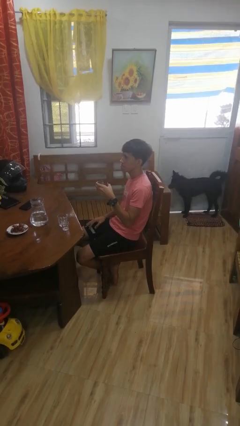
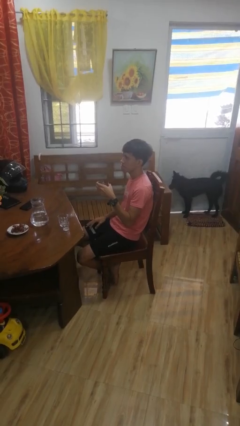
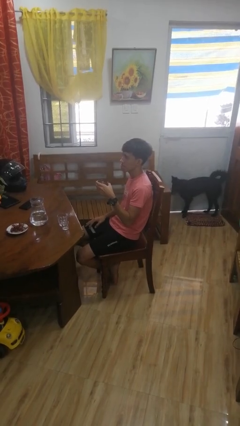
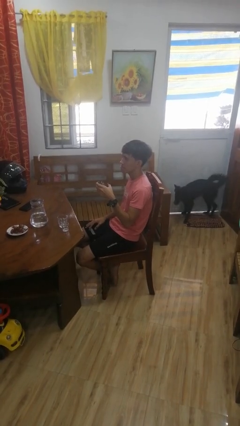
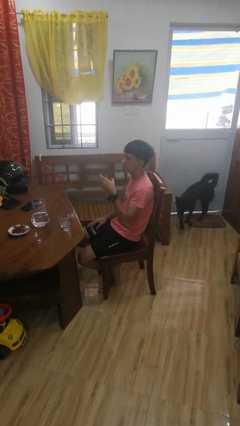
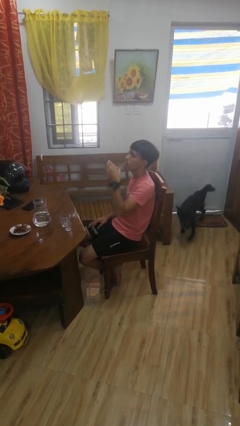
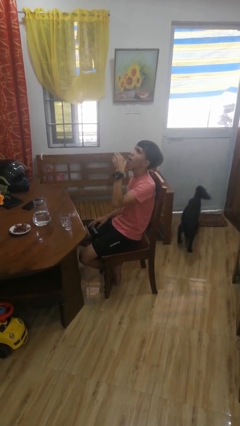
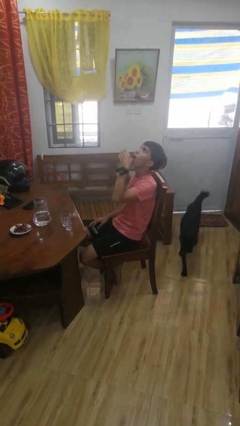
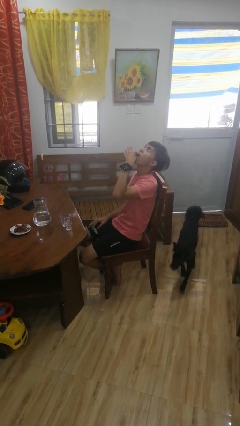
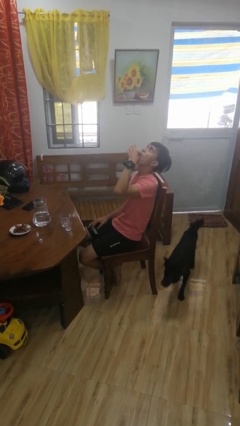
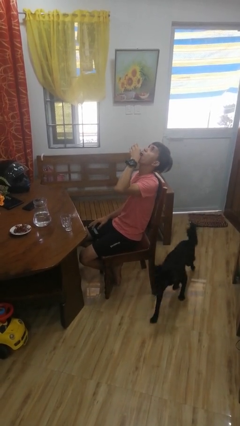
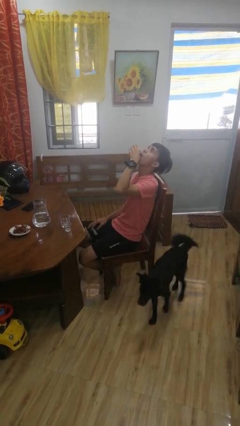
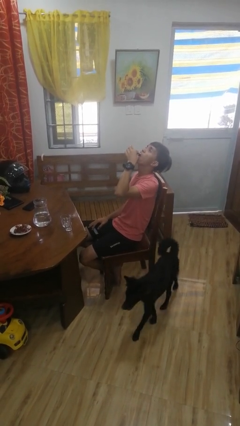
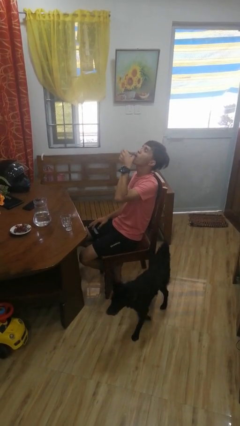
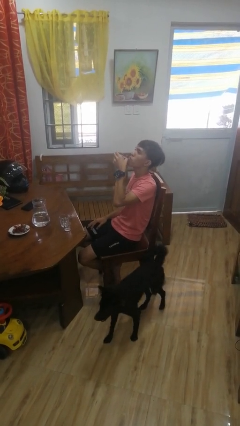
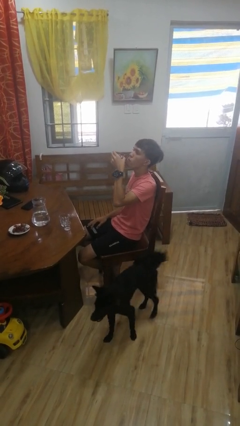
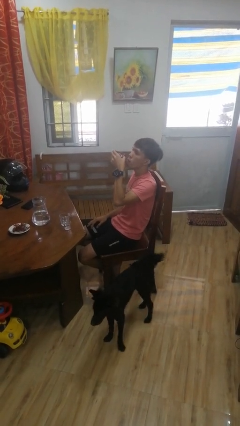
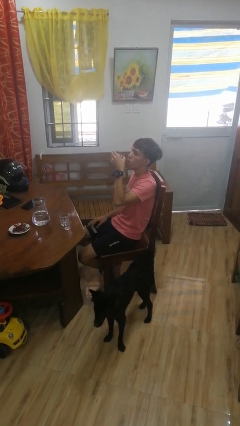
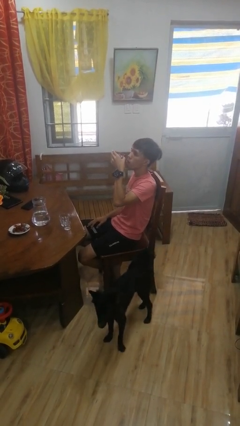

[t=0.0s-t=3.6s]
person drinks from shotglass

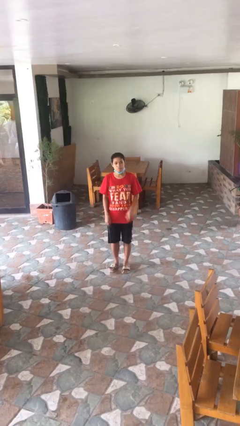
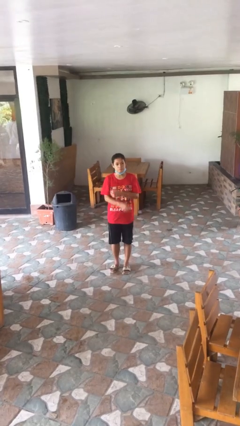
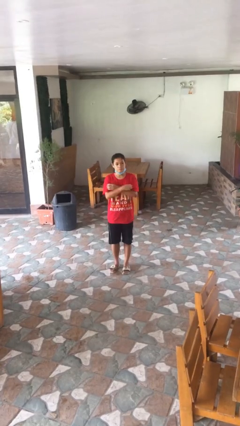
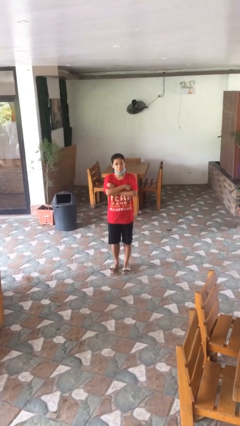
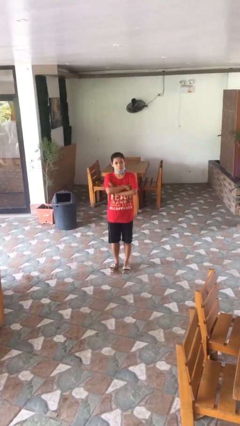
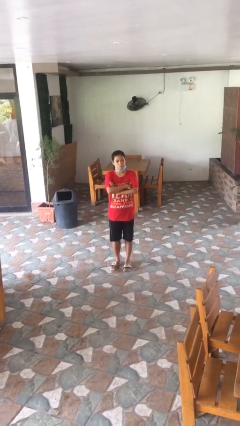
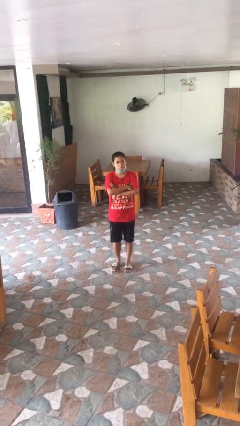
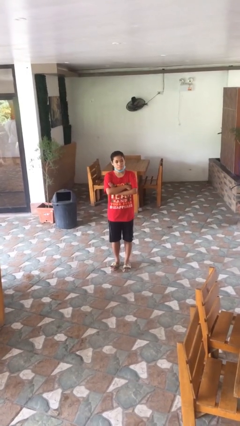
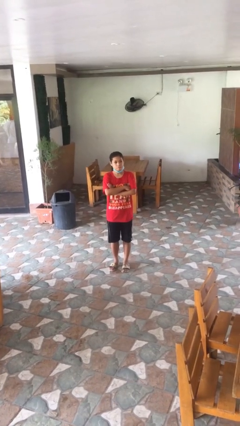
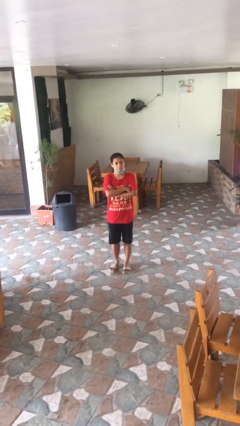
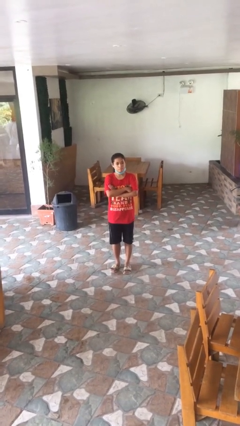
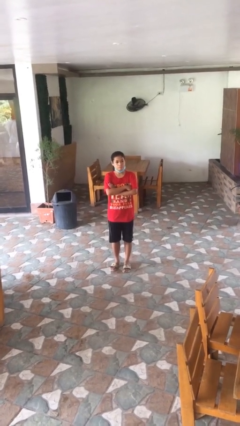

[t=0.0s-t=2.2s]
person crosses arms

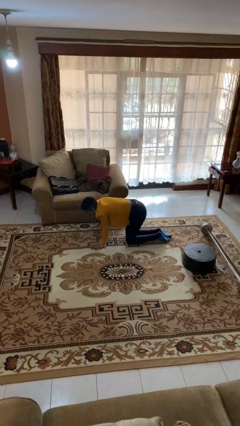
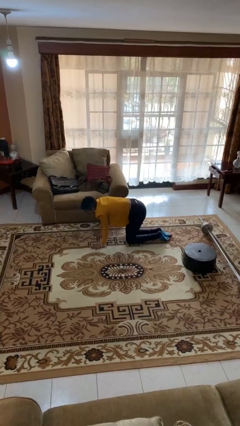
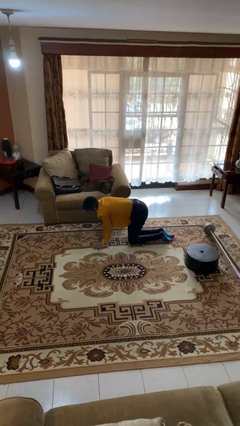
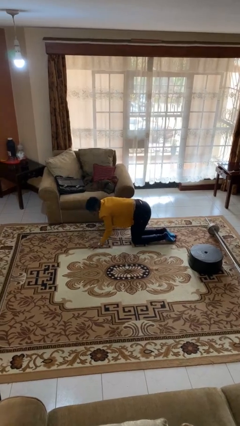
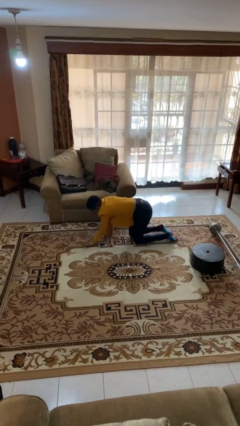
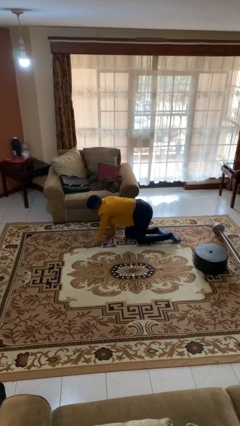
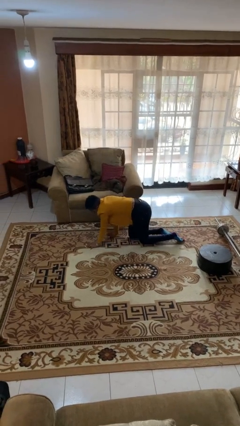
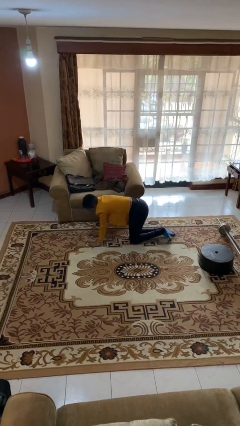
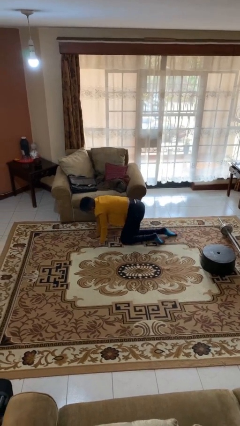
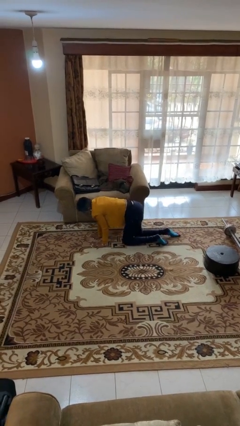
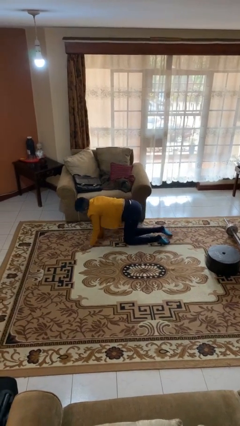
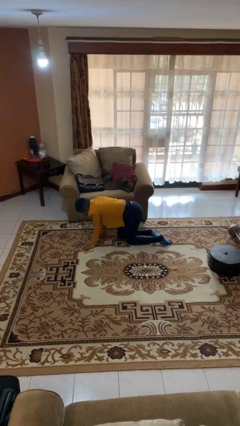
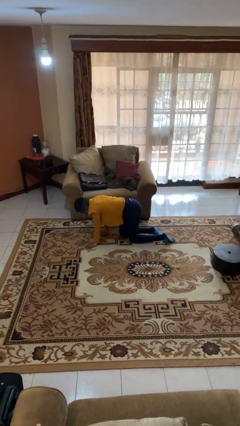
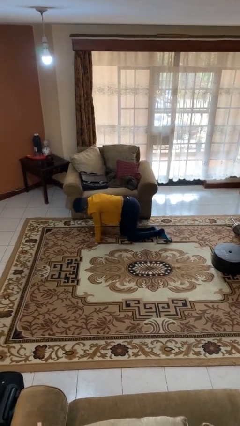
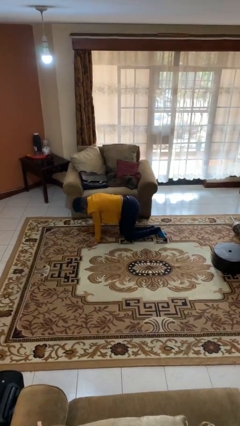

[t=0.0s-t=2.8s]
person crawls

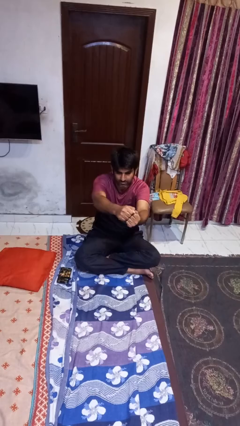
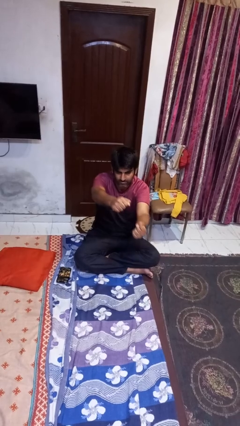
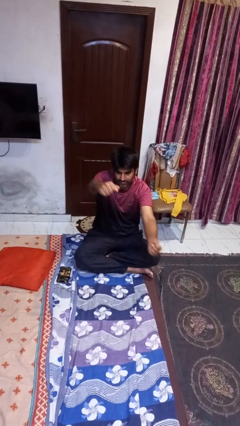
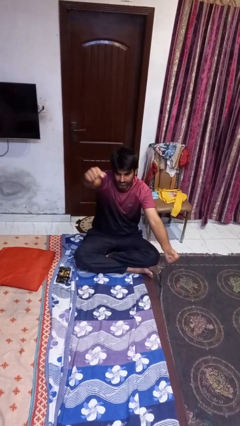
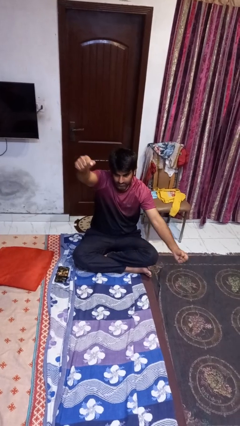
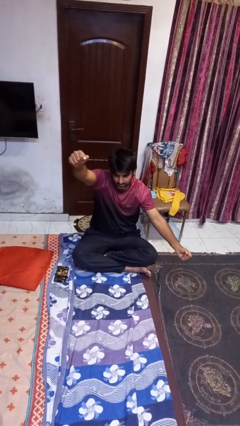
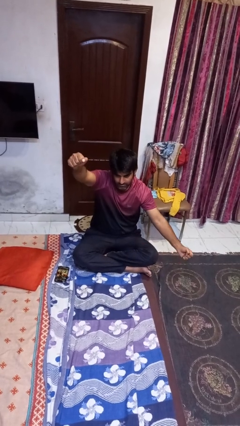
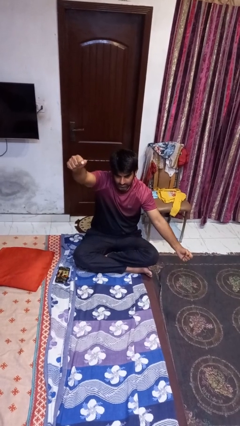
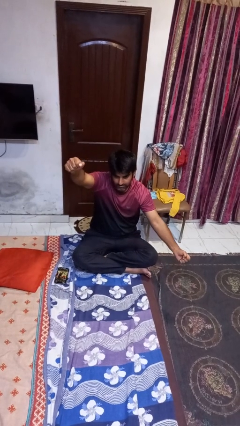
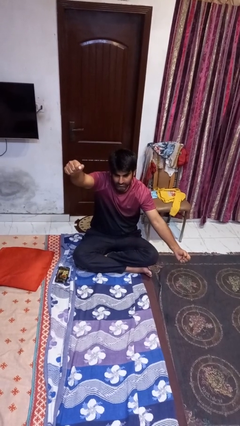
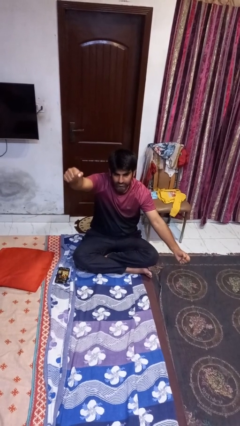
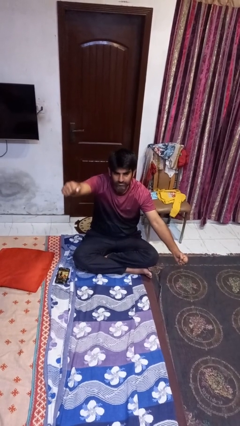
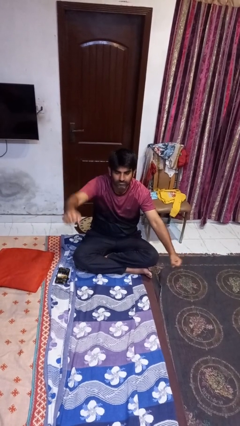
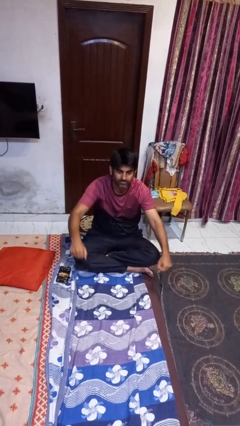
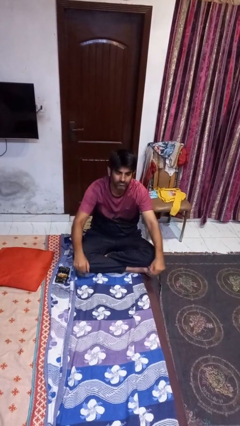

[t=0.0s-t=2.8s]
person gestures zoom out

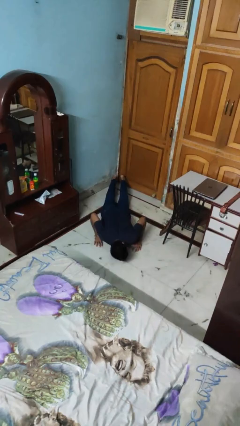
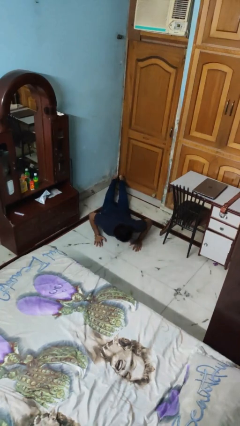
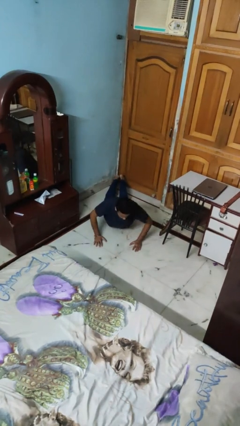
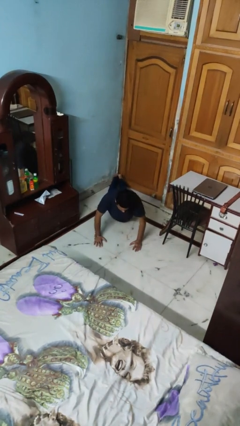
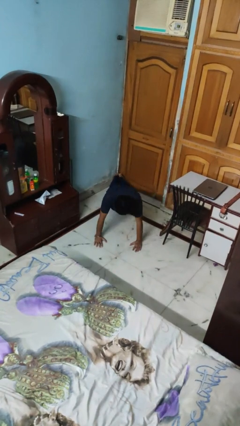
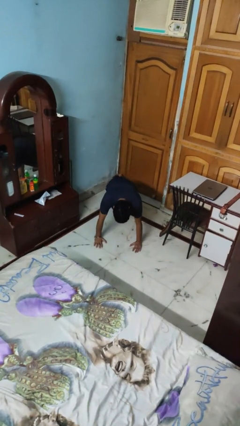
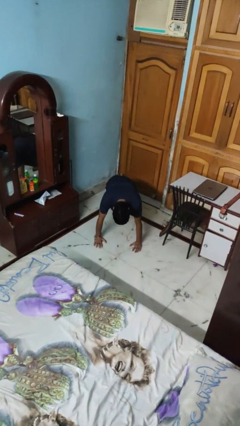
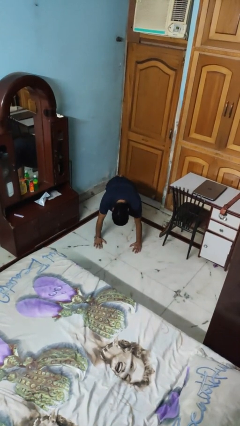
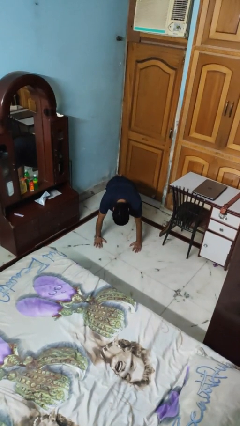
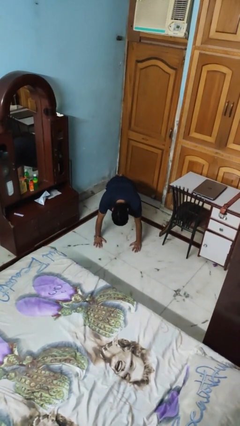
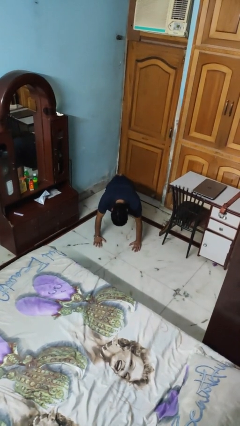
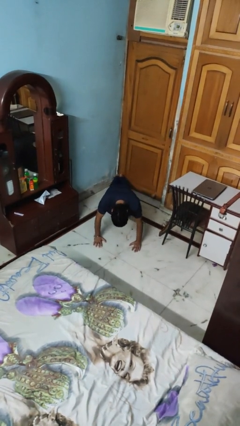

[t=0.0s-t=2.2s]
person exercises with pushup

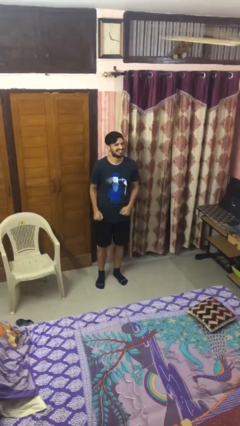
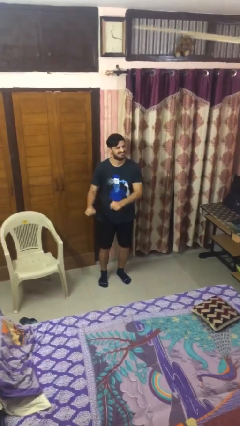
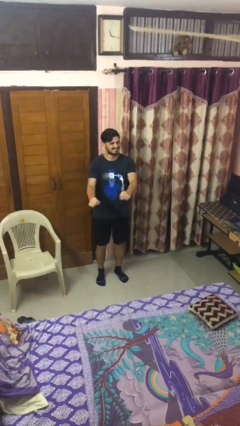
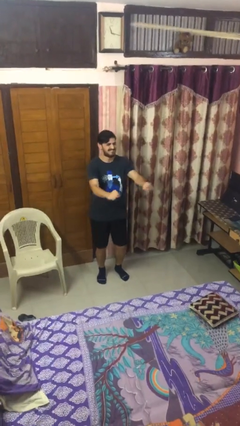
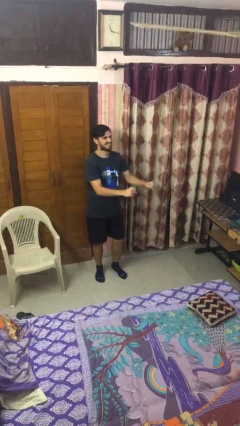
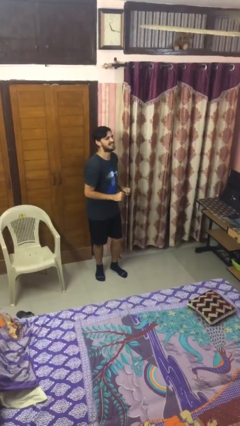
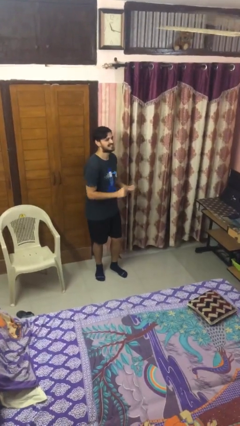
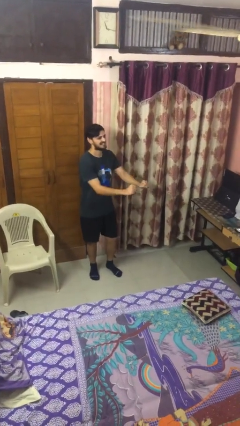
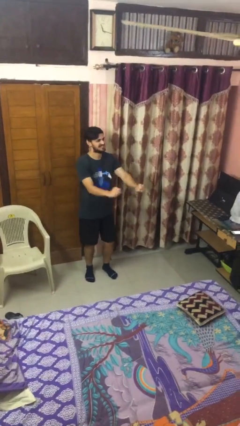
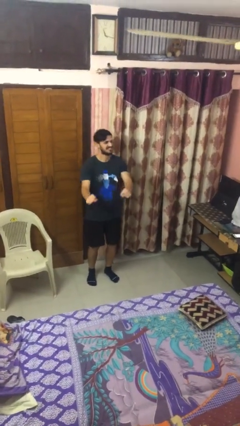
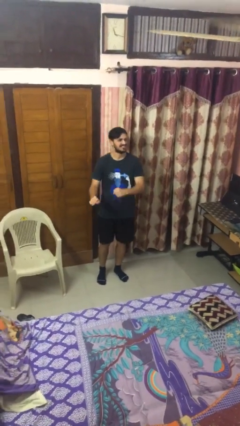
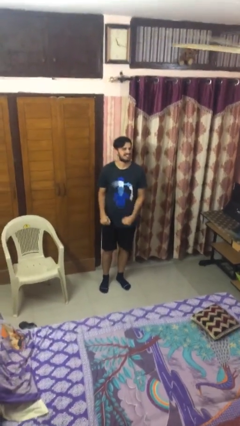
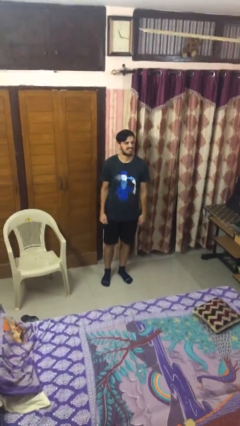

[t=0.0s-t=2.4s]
person dances in place

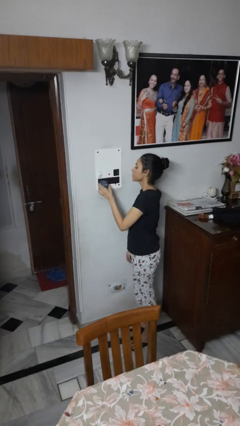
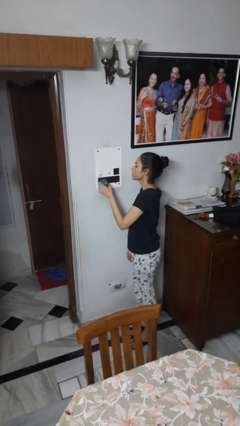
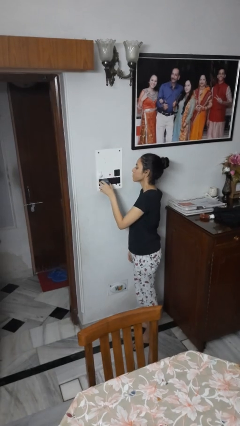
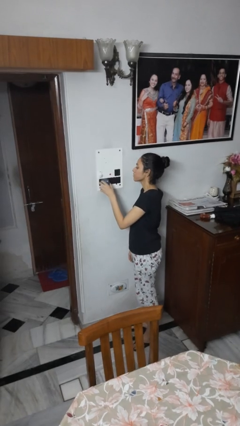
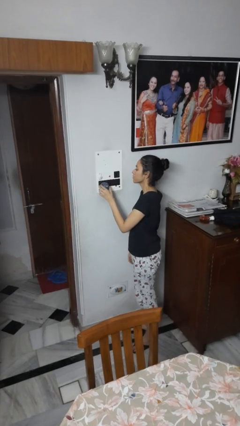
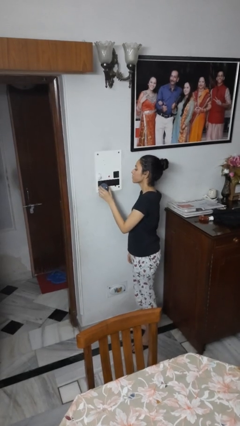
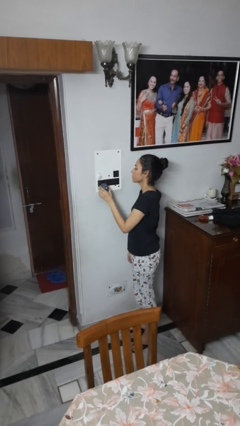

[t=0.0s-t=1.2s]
person plugs into electrical socket
